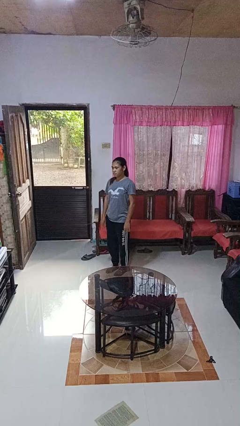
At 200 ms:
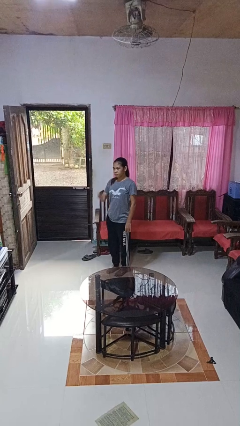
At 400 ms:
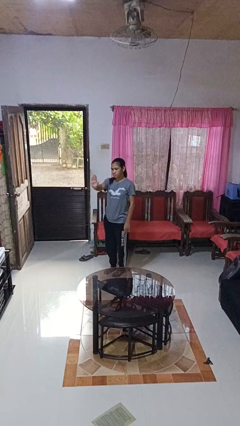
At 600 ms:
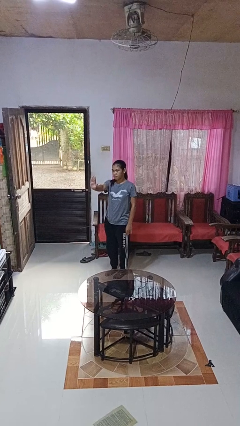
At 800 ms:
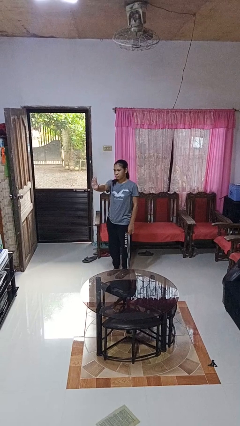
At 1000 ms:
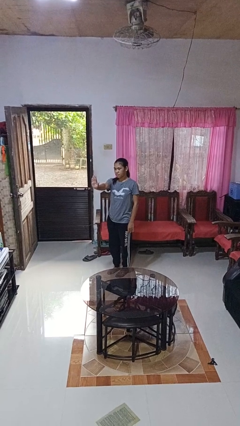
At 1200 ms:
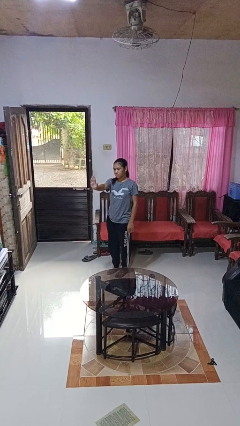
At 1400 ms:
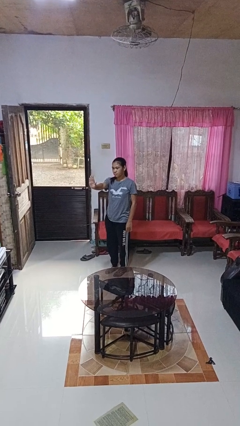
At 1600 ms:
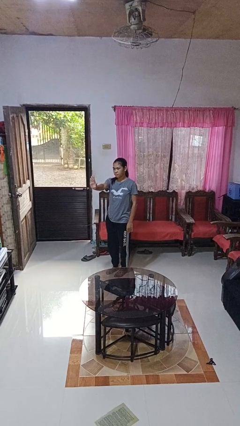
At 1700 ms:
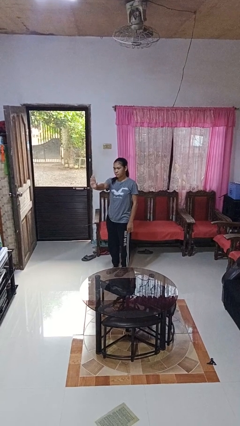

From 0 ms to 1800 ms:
person gestures stop

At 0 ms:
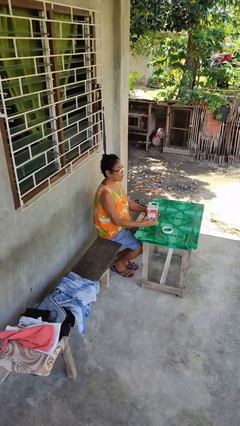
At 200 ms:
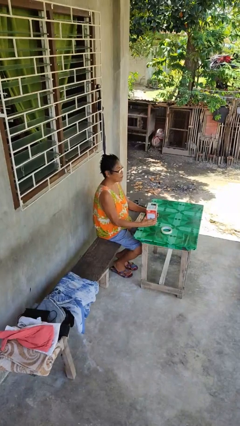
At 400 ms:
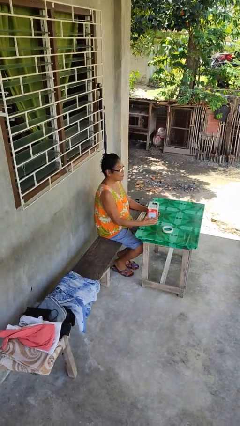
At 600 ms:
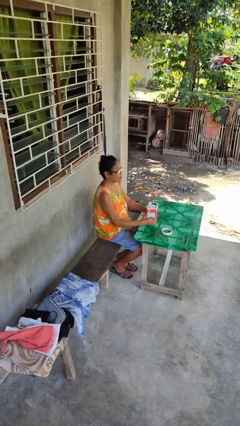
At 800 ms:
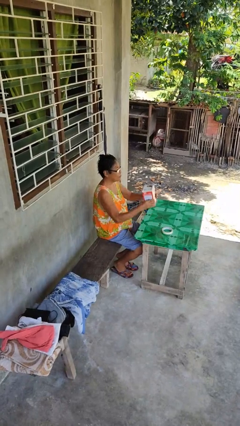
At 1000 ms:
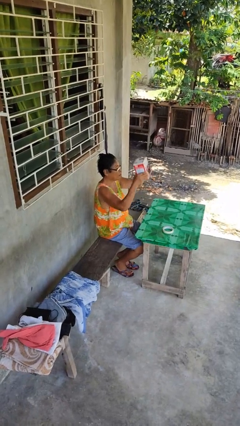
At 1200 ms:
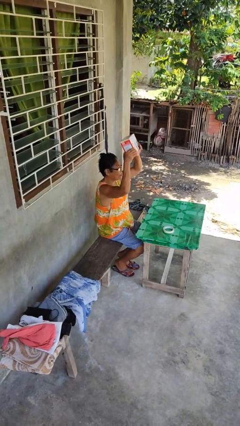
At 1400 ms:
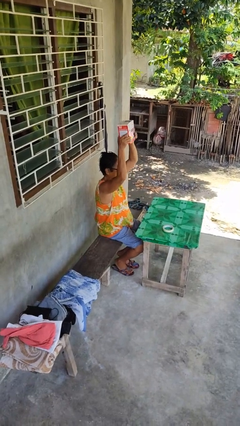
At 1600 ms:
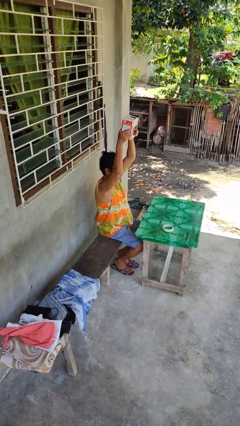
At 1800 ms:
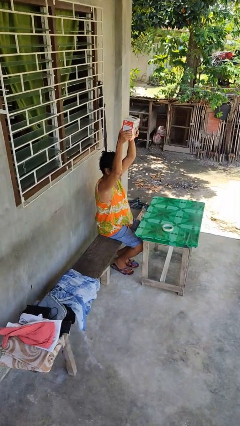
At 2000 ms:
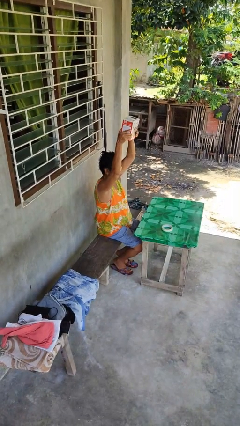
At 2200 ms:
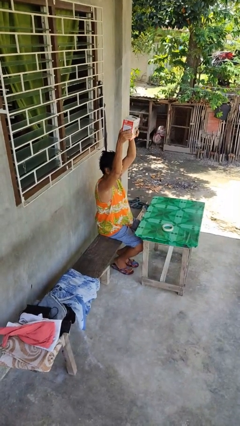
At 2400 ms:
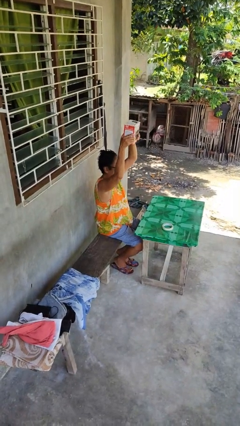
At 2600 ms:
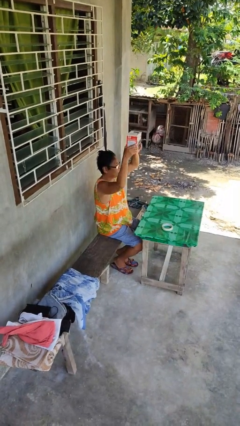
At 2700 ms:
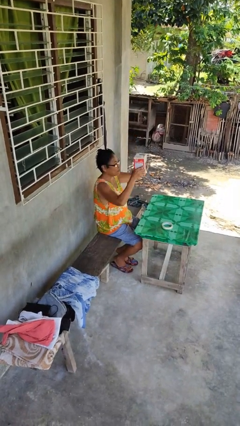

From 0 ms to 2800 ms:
person holds object above head

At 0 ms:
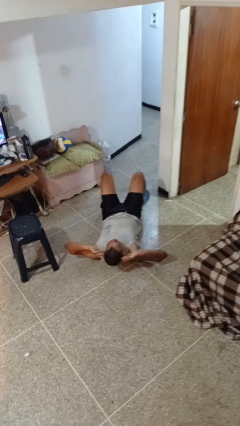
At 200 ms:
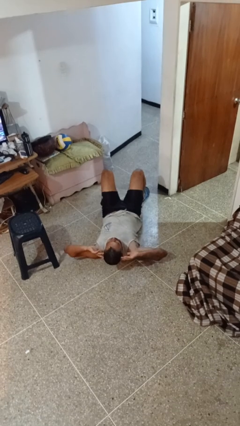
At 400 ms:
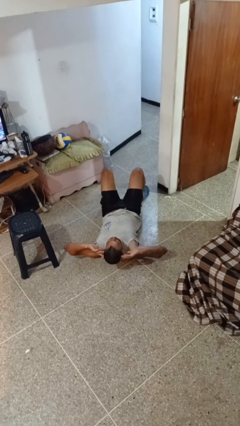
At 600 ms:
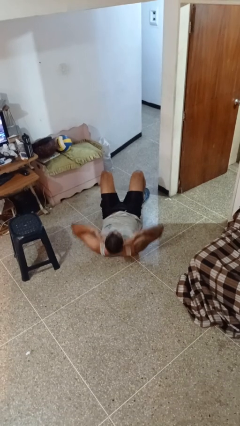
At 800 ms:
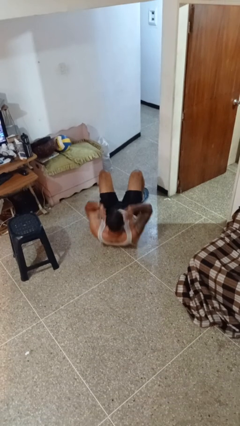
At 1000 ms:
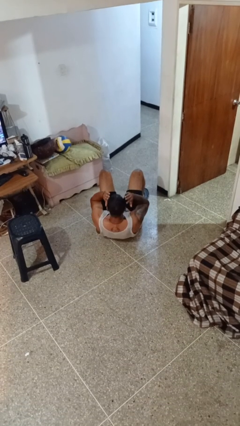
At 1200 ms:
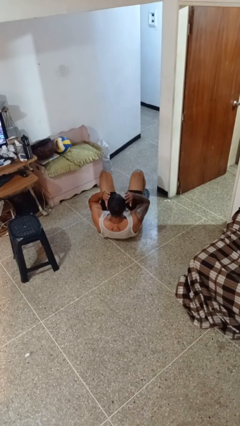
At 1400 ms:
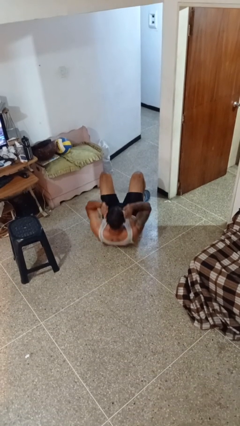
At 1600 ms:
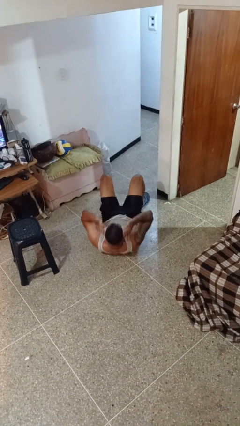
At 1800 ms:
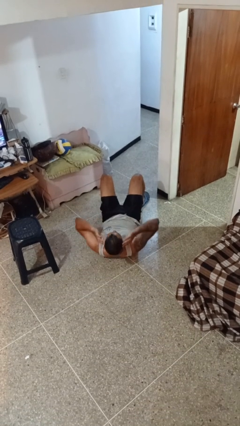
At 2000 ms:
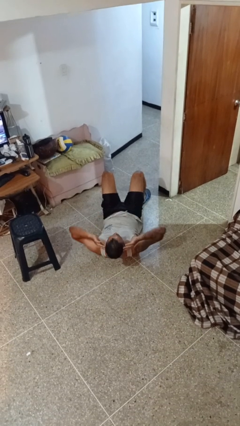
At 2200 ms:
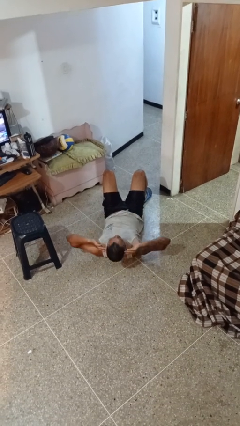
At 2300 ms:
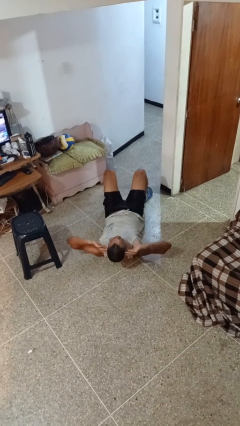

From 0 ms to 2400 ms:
person exercises with situp

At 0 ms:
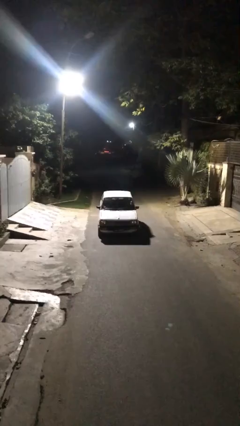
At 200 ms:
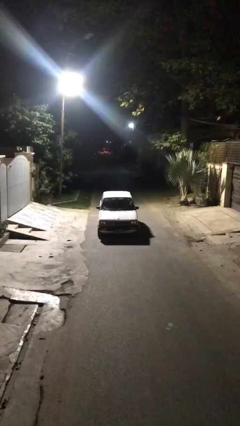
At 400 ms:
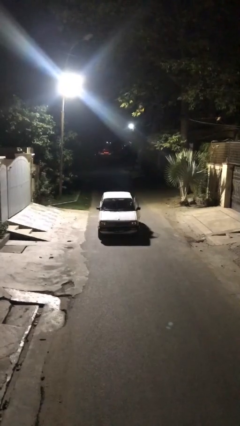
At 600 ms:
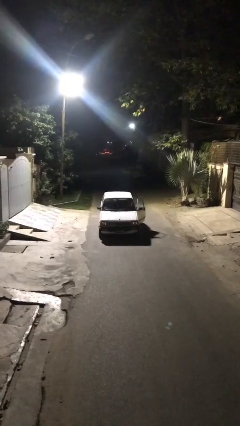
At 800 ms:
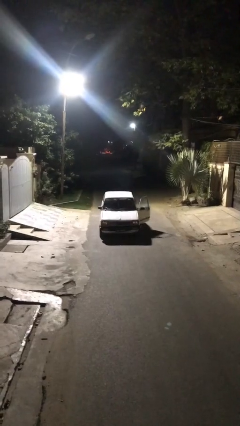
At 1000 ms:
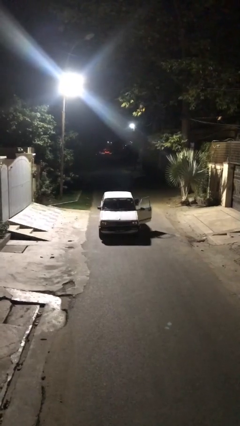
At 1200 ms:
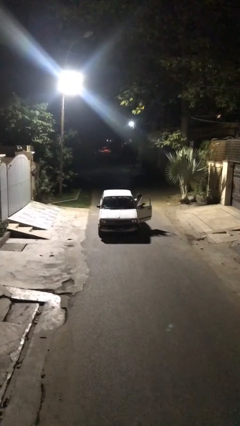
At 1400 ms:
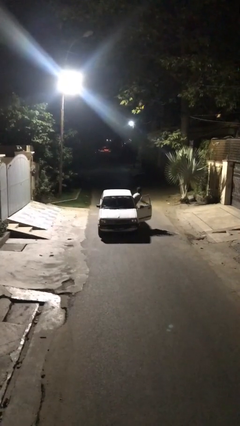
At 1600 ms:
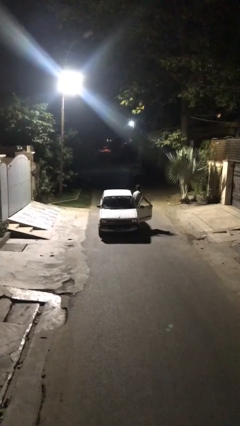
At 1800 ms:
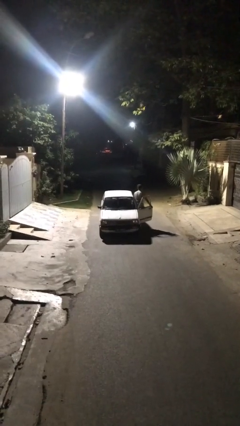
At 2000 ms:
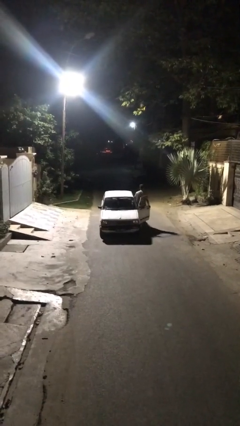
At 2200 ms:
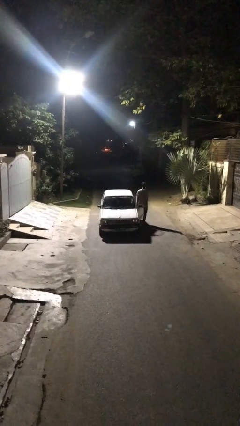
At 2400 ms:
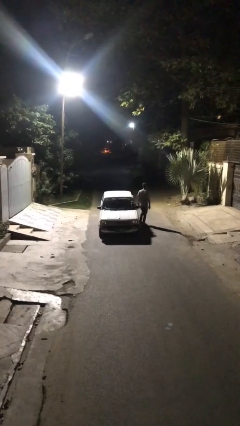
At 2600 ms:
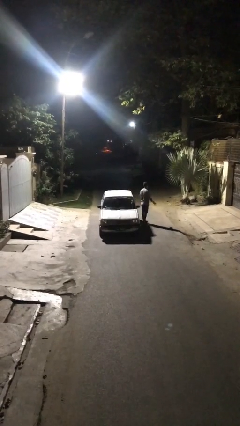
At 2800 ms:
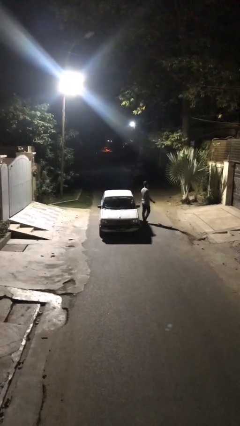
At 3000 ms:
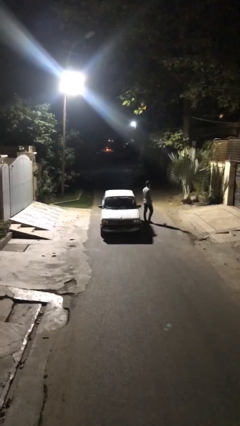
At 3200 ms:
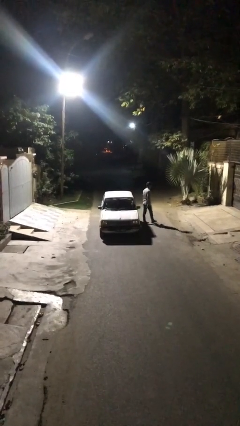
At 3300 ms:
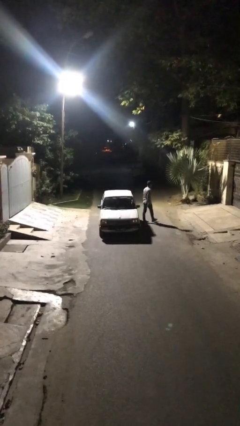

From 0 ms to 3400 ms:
car drops off person

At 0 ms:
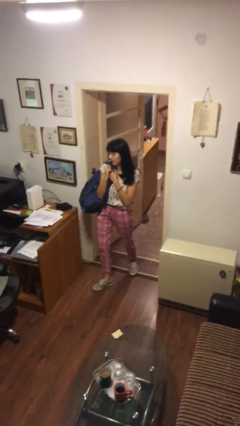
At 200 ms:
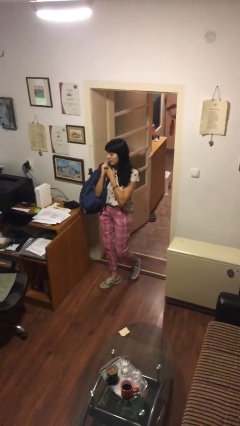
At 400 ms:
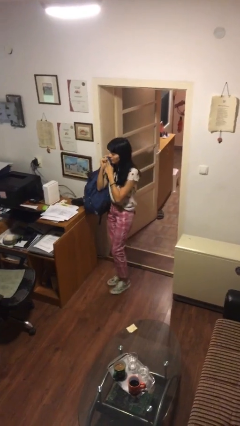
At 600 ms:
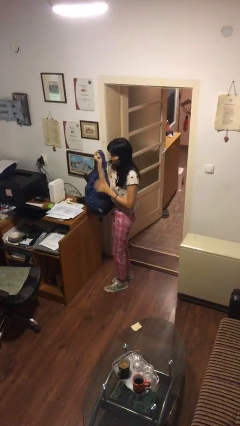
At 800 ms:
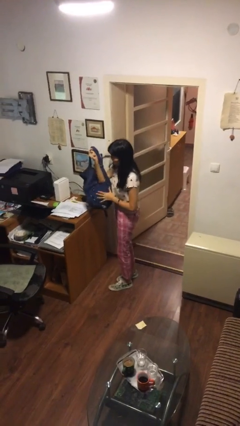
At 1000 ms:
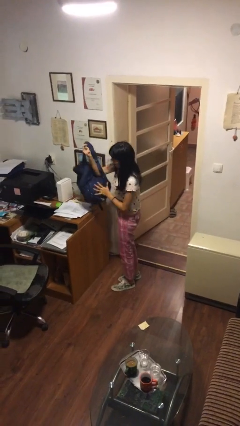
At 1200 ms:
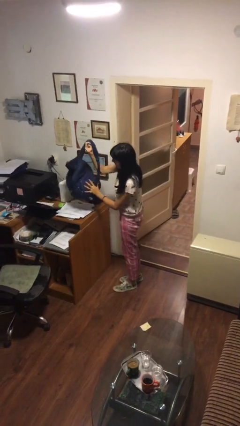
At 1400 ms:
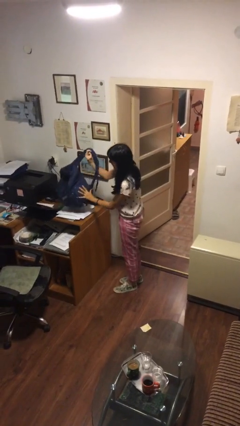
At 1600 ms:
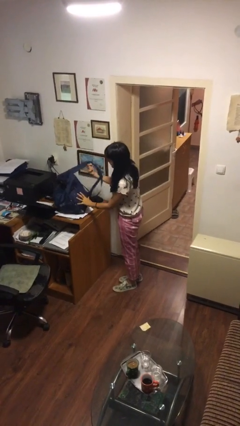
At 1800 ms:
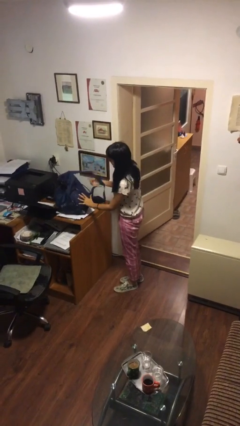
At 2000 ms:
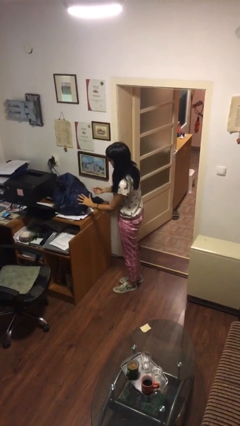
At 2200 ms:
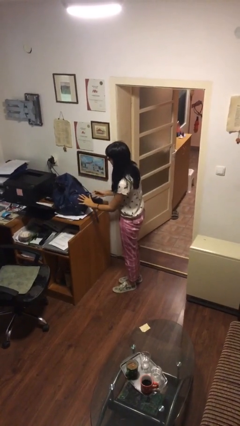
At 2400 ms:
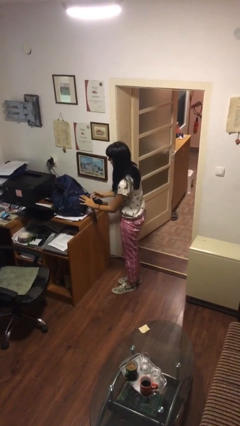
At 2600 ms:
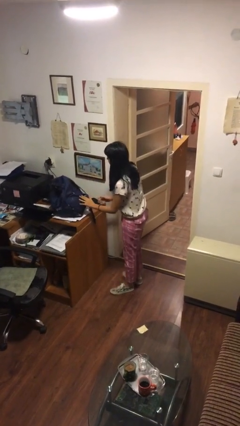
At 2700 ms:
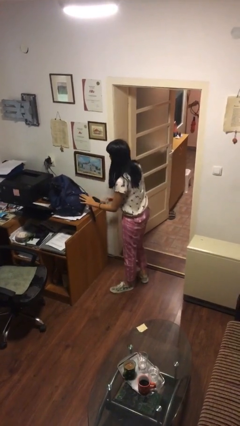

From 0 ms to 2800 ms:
person puts down object on table

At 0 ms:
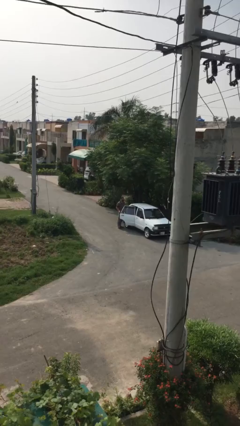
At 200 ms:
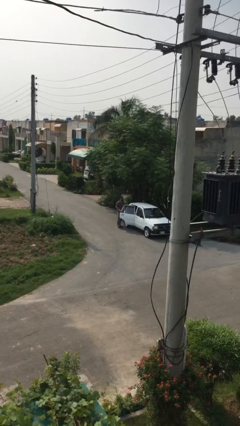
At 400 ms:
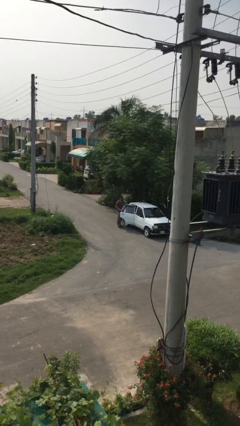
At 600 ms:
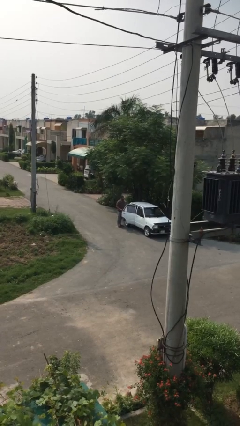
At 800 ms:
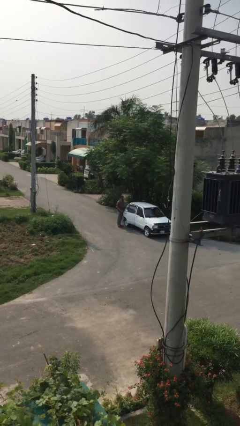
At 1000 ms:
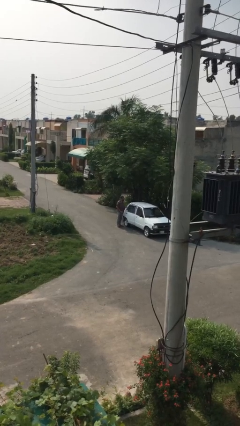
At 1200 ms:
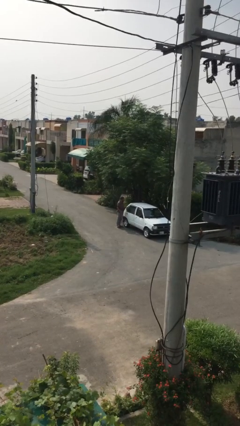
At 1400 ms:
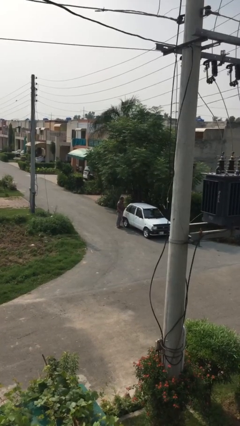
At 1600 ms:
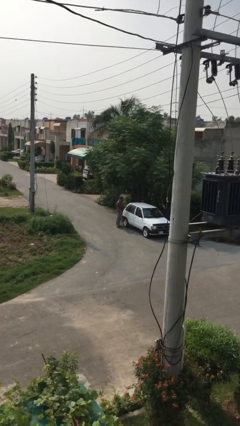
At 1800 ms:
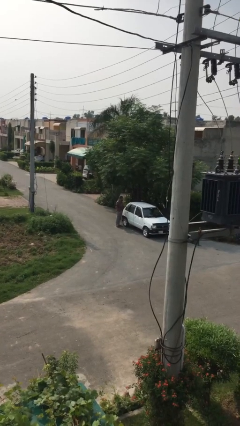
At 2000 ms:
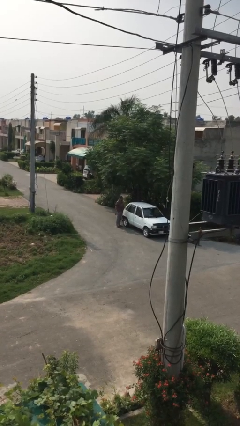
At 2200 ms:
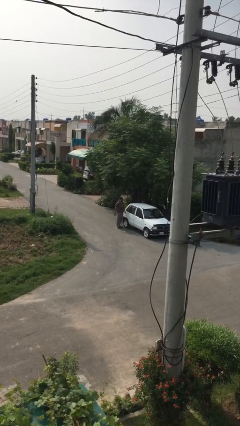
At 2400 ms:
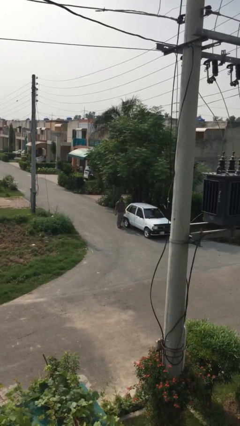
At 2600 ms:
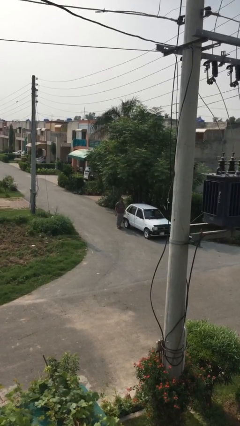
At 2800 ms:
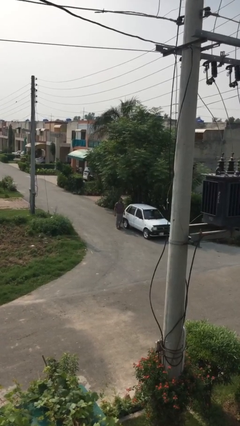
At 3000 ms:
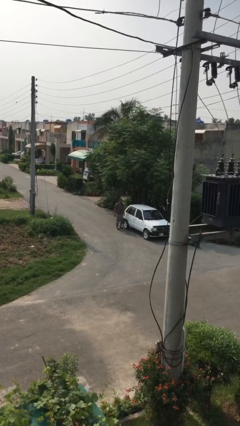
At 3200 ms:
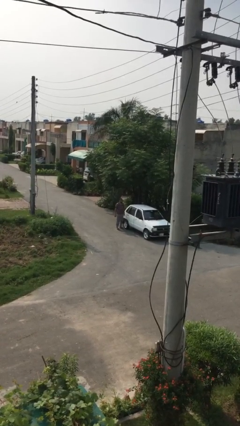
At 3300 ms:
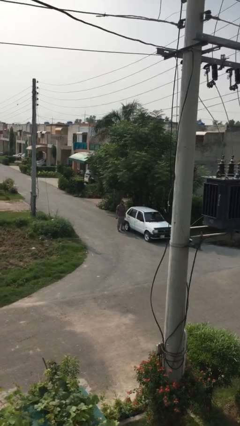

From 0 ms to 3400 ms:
person closes car door

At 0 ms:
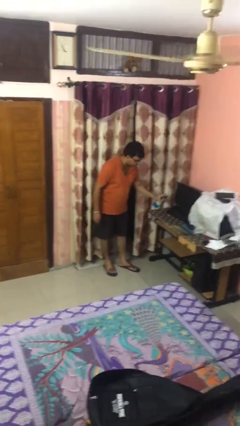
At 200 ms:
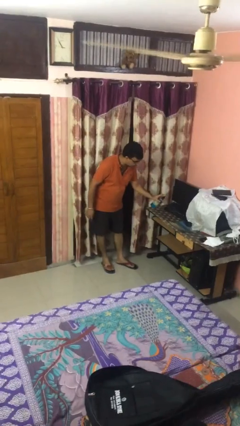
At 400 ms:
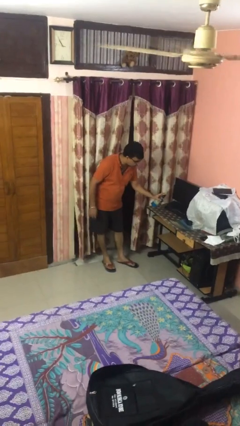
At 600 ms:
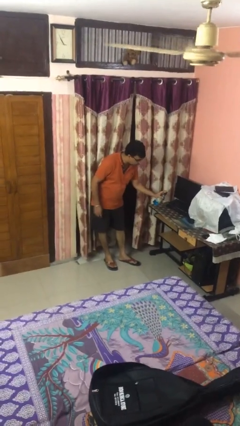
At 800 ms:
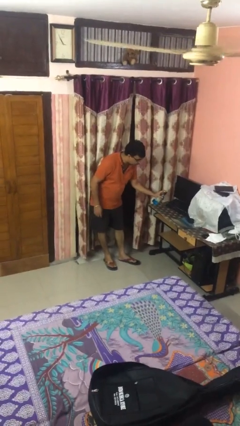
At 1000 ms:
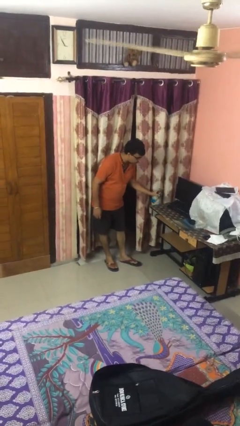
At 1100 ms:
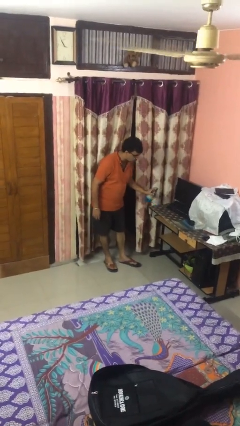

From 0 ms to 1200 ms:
person sprays from bottle
